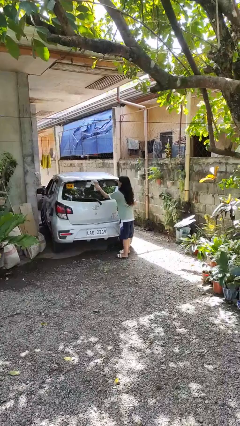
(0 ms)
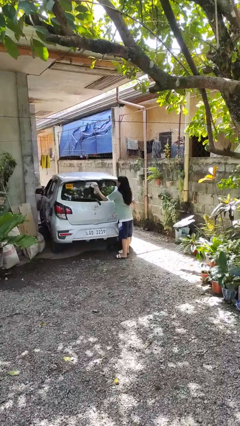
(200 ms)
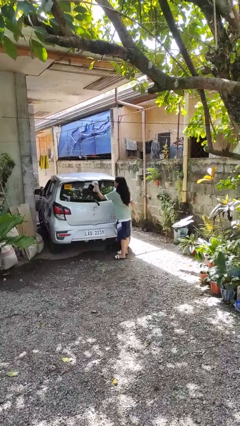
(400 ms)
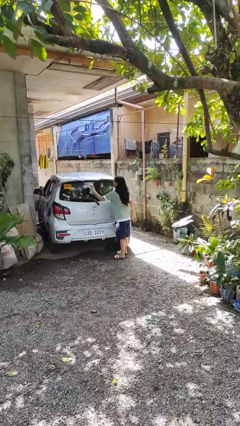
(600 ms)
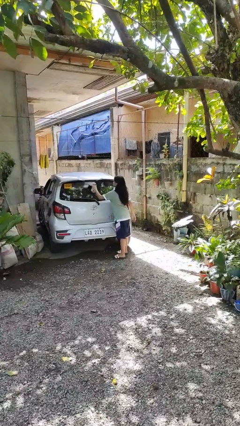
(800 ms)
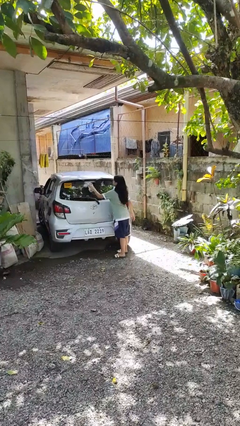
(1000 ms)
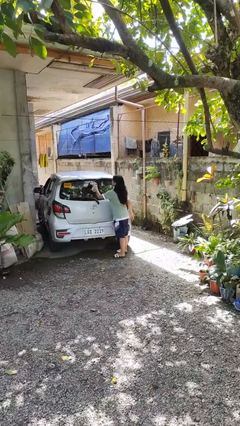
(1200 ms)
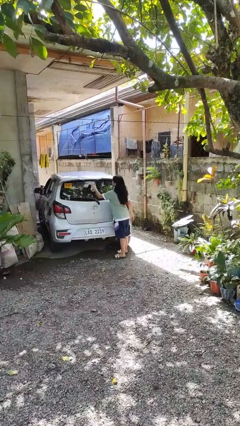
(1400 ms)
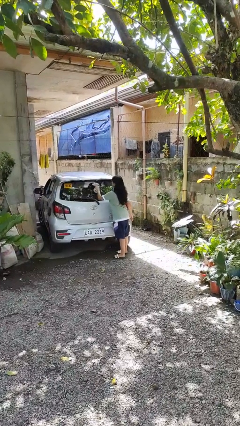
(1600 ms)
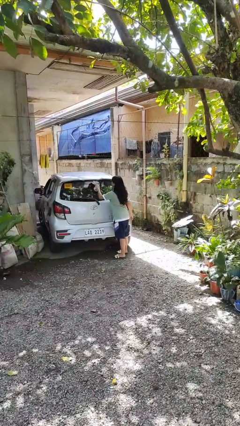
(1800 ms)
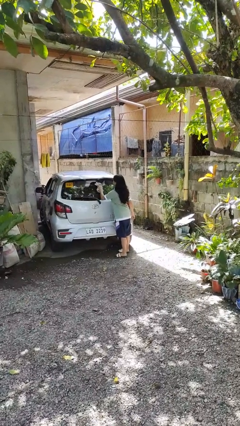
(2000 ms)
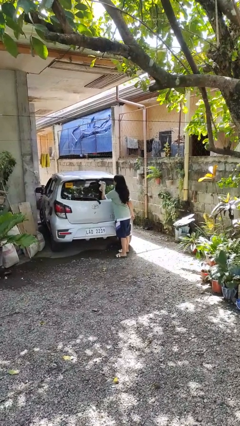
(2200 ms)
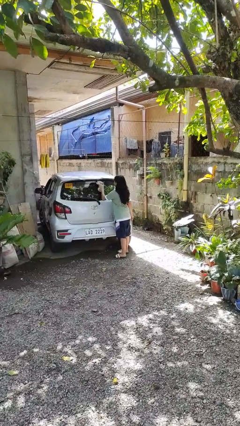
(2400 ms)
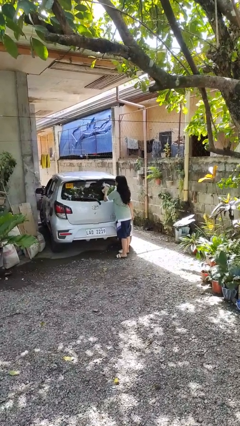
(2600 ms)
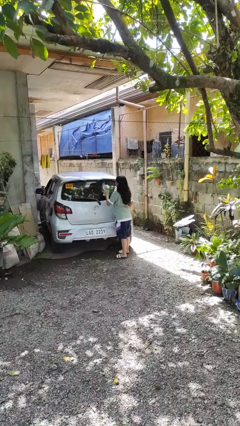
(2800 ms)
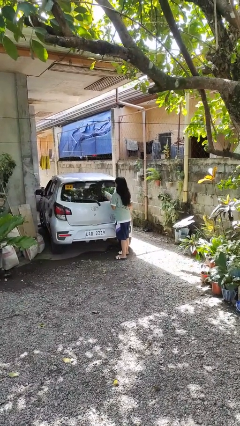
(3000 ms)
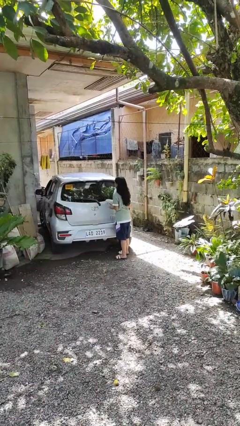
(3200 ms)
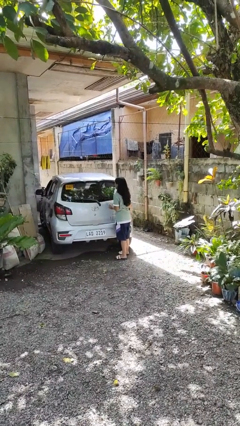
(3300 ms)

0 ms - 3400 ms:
person polishes car with rag

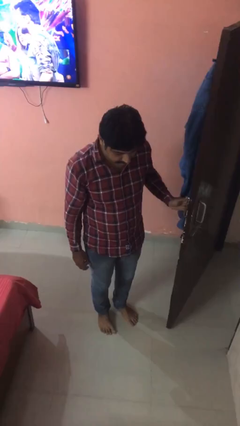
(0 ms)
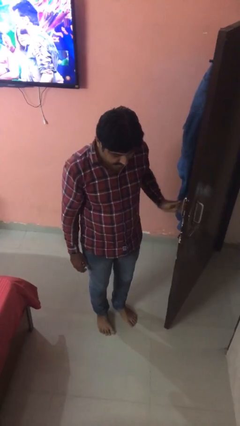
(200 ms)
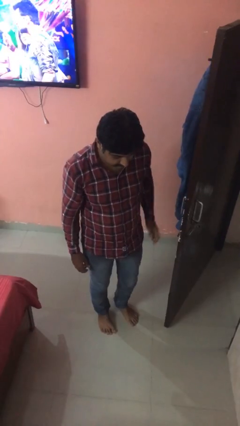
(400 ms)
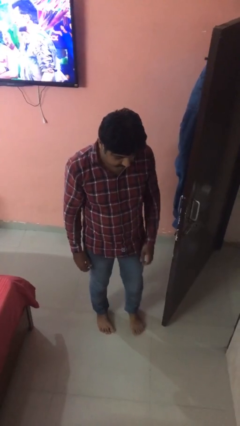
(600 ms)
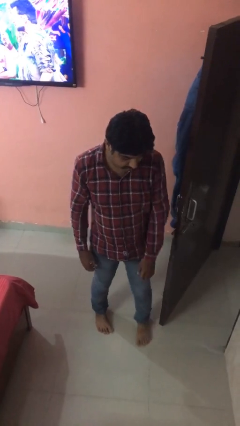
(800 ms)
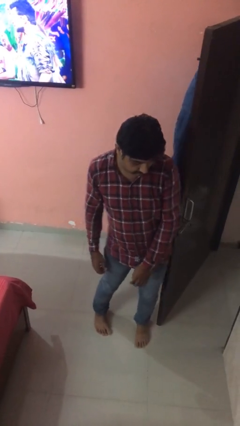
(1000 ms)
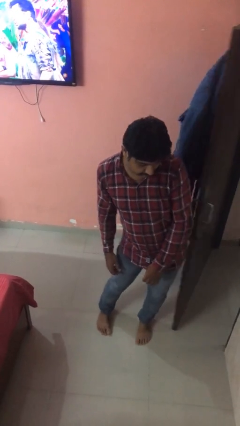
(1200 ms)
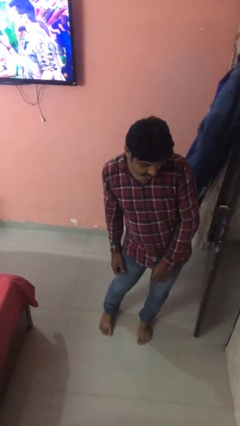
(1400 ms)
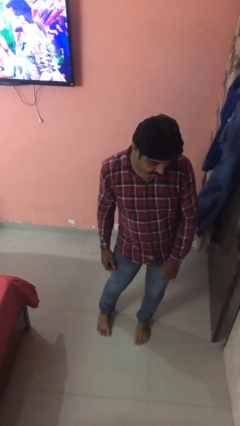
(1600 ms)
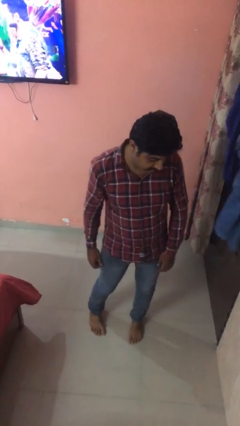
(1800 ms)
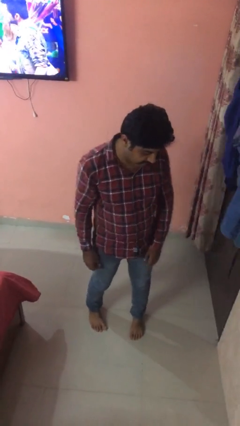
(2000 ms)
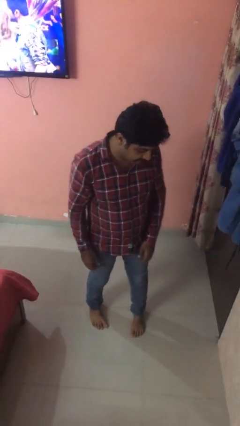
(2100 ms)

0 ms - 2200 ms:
person closes door with hip

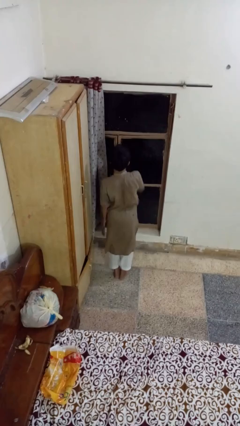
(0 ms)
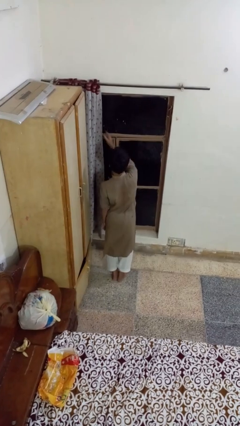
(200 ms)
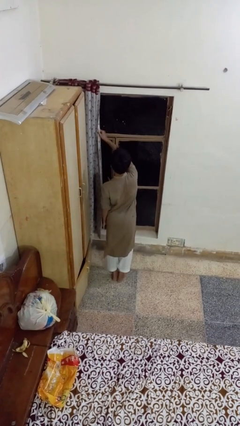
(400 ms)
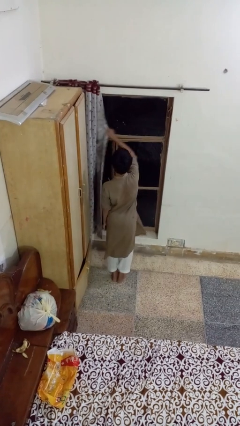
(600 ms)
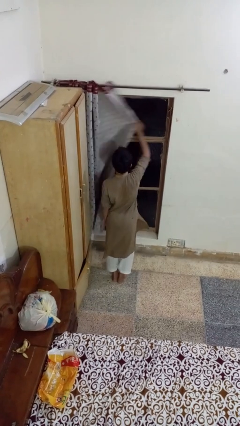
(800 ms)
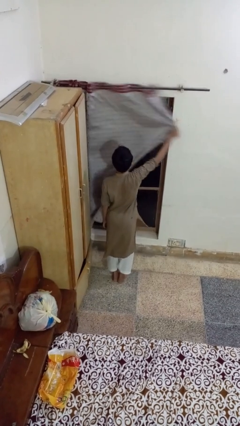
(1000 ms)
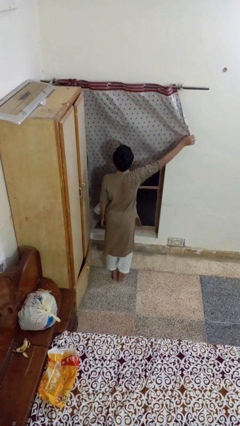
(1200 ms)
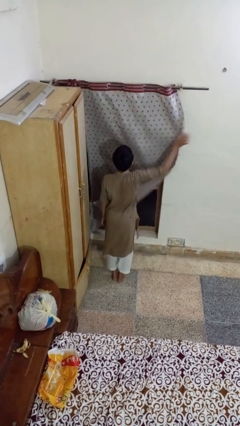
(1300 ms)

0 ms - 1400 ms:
person closes curtains

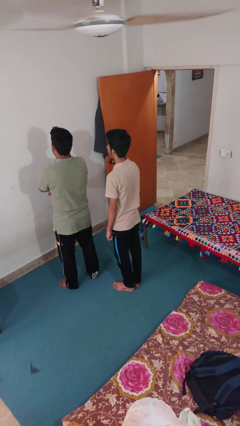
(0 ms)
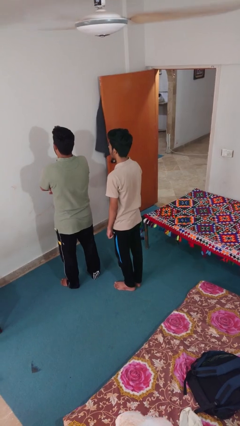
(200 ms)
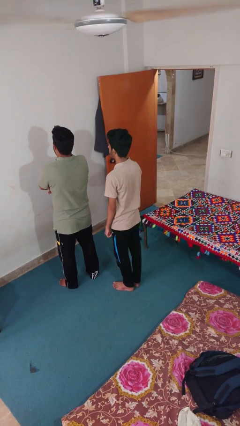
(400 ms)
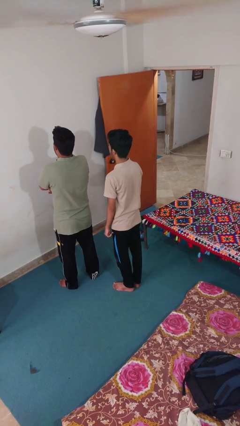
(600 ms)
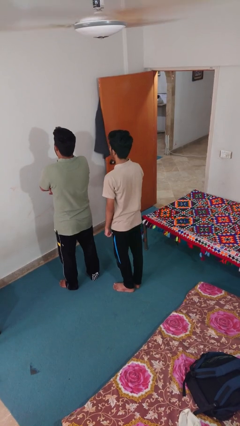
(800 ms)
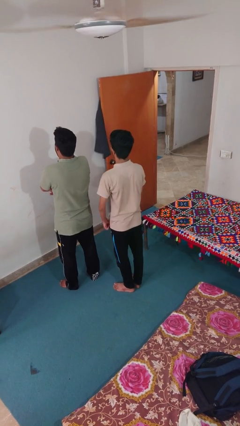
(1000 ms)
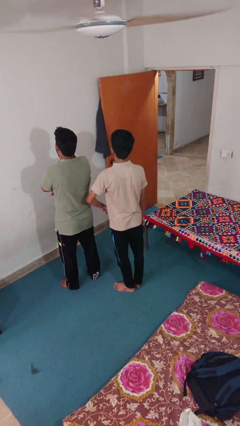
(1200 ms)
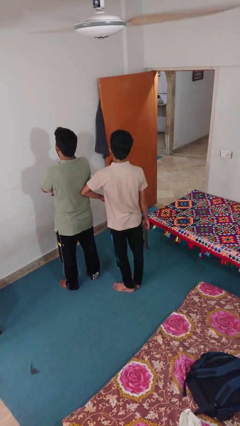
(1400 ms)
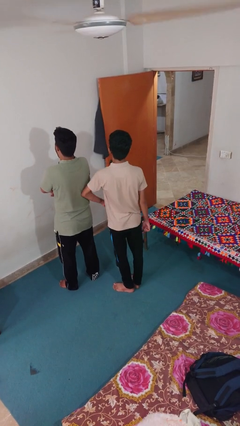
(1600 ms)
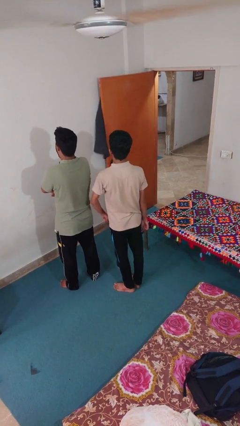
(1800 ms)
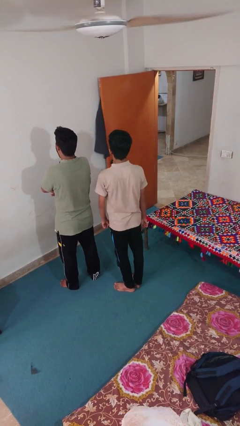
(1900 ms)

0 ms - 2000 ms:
person nudges person with elbow

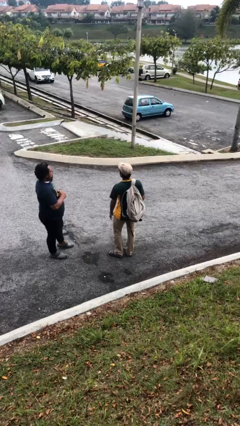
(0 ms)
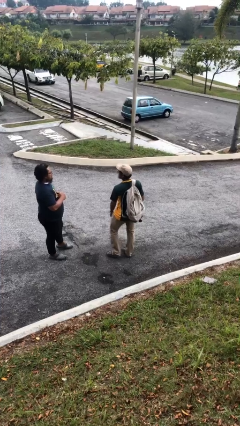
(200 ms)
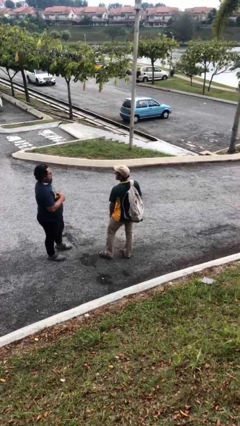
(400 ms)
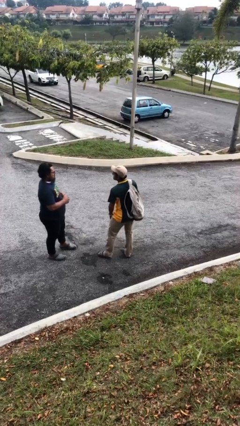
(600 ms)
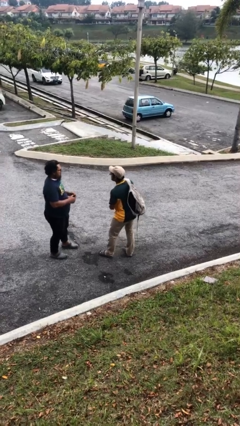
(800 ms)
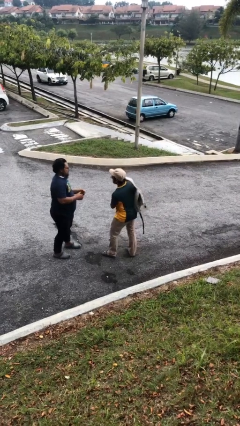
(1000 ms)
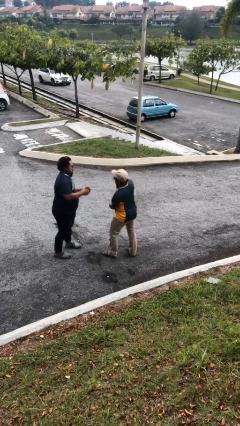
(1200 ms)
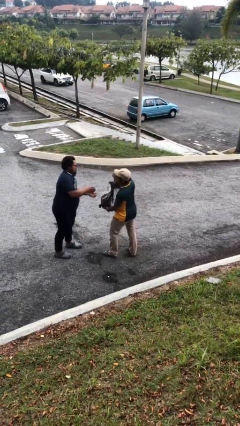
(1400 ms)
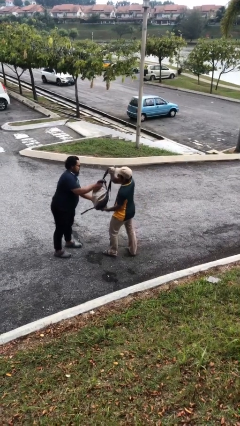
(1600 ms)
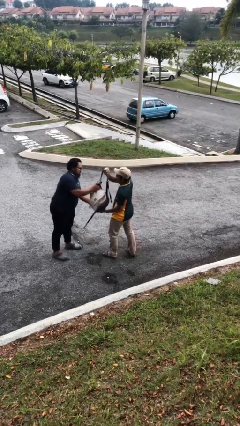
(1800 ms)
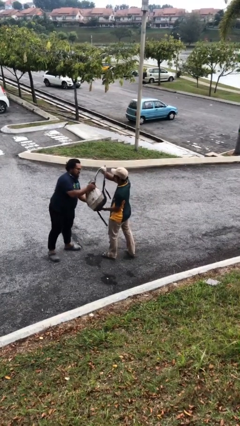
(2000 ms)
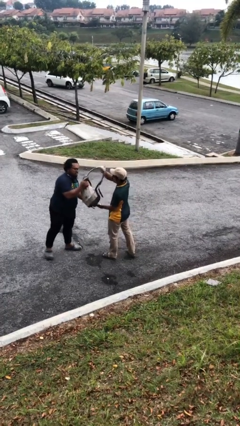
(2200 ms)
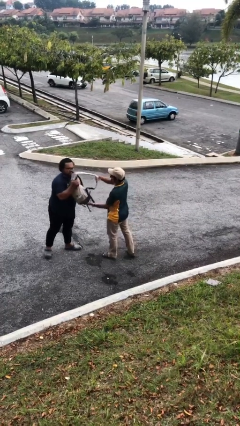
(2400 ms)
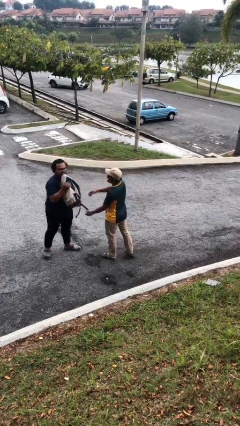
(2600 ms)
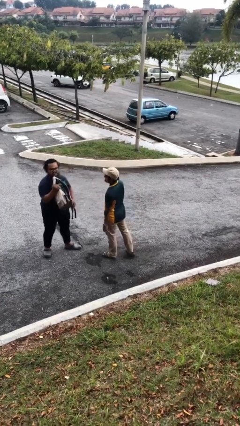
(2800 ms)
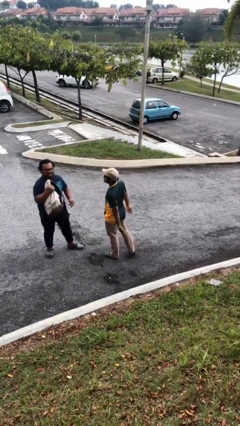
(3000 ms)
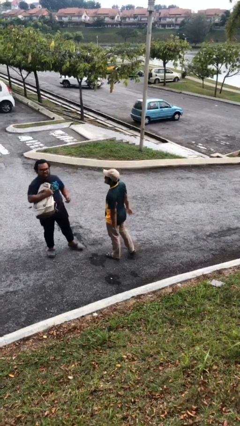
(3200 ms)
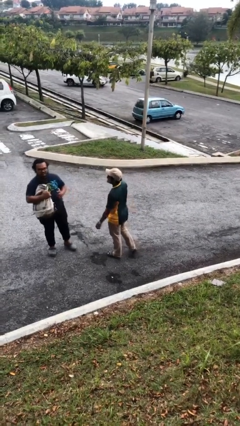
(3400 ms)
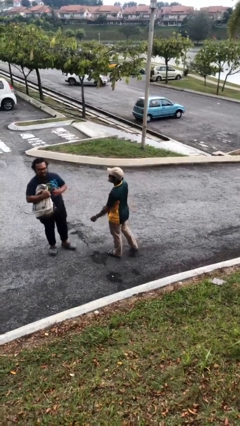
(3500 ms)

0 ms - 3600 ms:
person transfers object to person

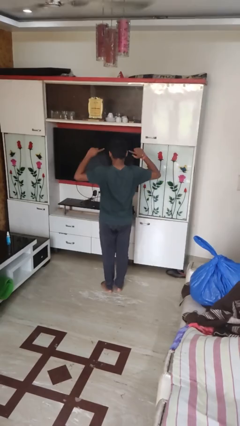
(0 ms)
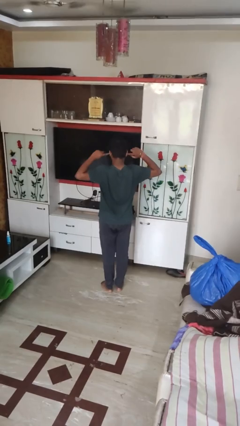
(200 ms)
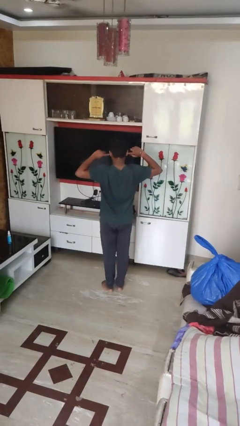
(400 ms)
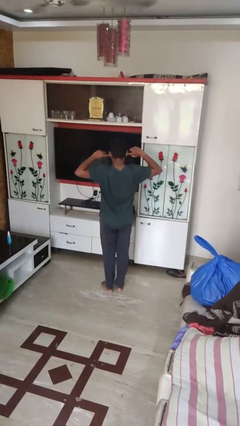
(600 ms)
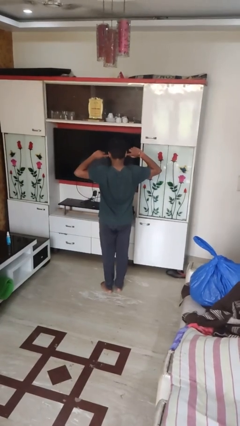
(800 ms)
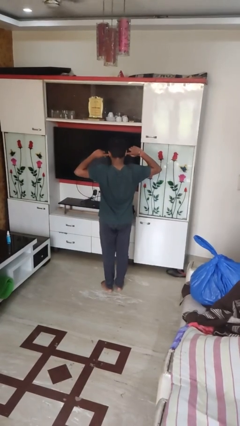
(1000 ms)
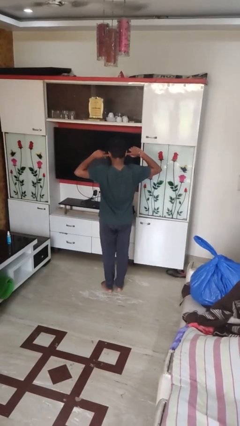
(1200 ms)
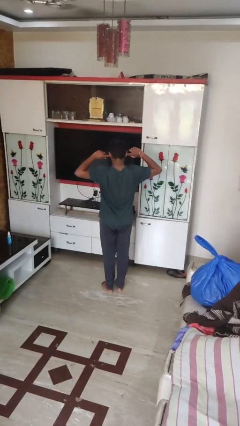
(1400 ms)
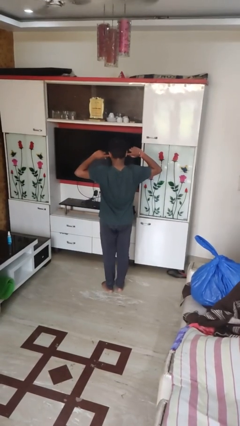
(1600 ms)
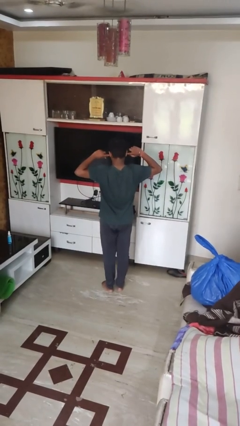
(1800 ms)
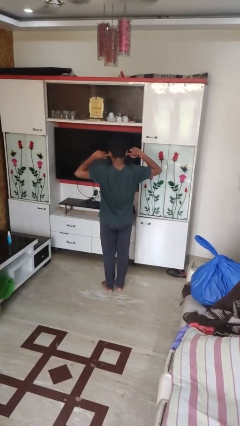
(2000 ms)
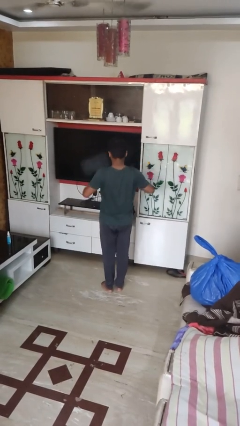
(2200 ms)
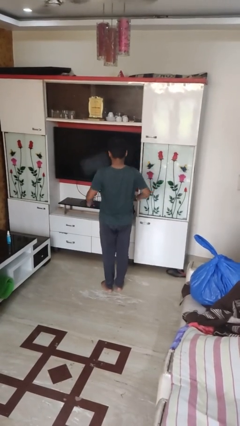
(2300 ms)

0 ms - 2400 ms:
person puts fingers in ear

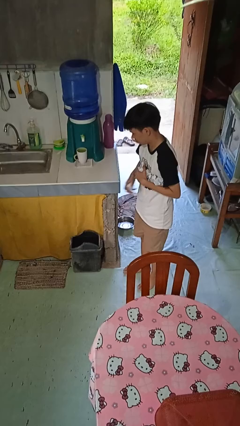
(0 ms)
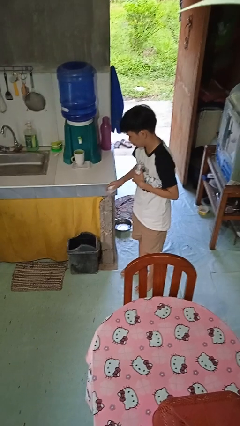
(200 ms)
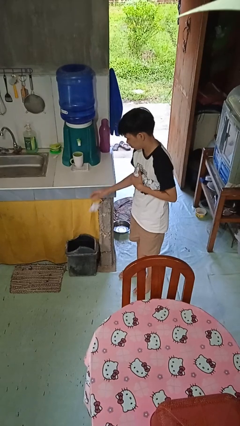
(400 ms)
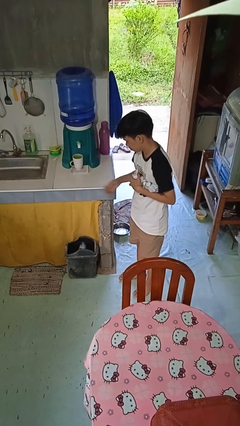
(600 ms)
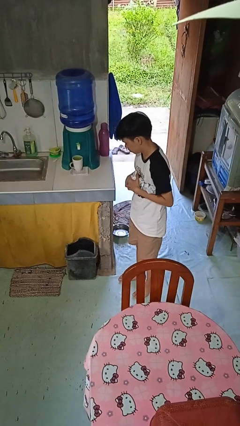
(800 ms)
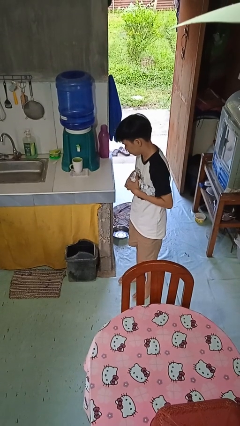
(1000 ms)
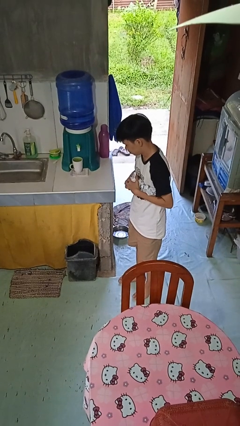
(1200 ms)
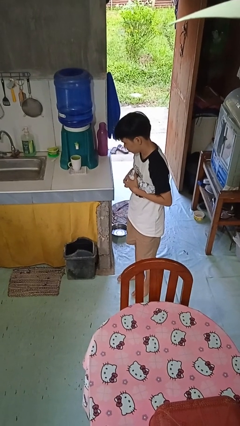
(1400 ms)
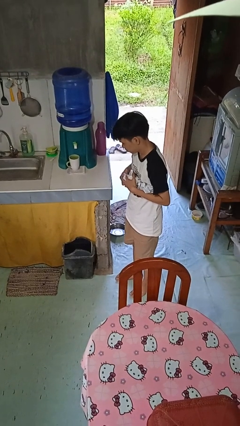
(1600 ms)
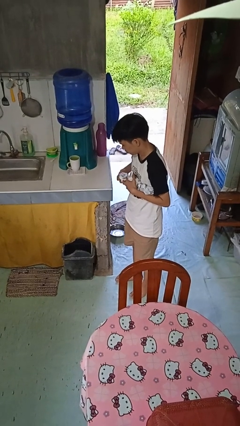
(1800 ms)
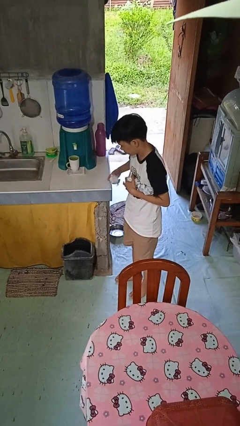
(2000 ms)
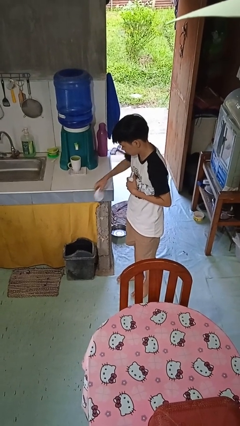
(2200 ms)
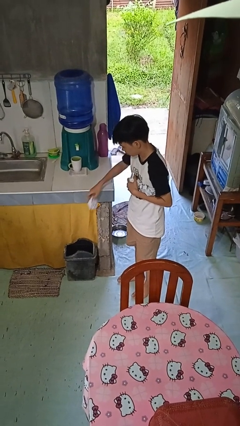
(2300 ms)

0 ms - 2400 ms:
person discards trash
